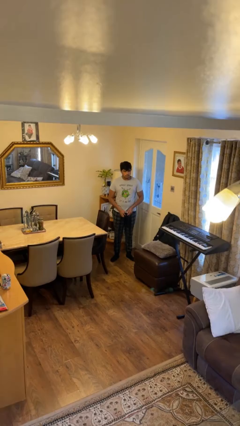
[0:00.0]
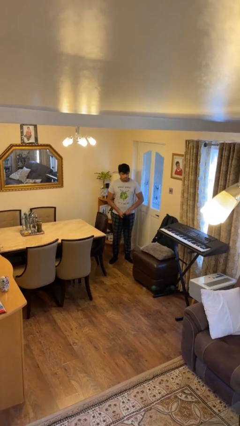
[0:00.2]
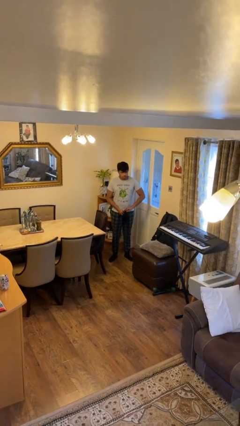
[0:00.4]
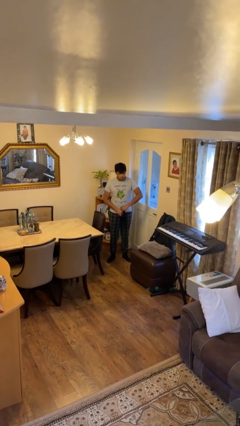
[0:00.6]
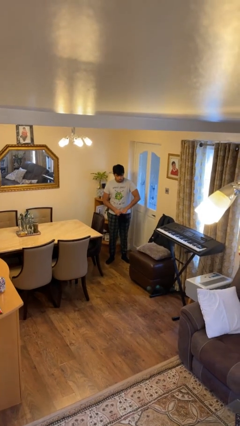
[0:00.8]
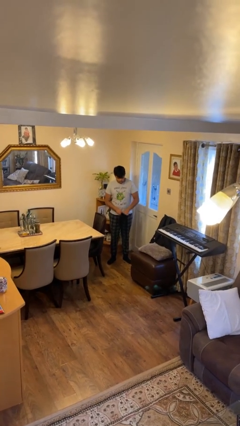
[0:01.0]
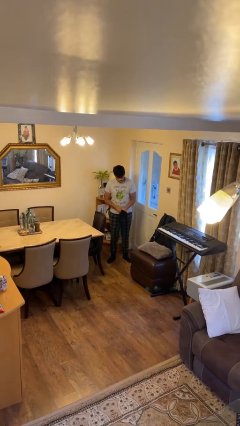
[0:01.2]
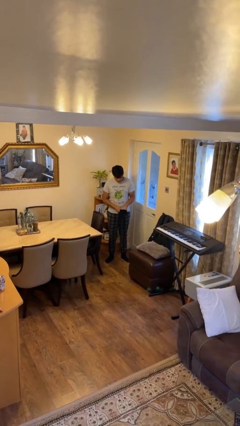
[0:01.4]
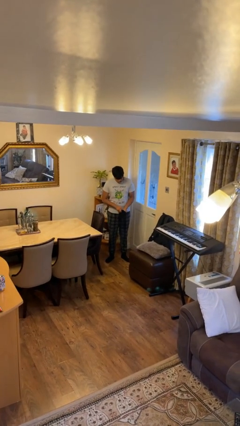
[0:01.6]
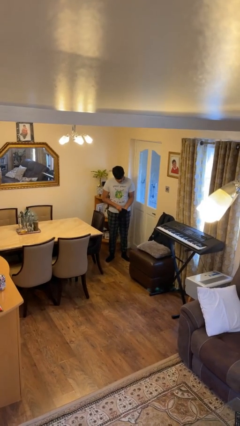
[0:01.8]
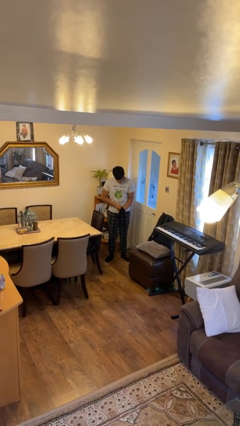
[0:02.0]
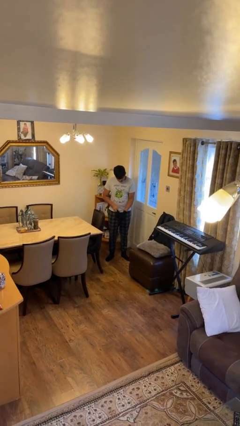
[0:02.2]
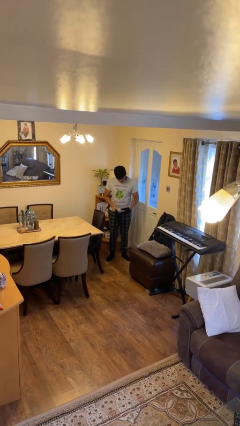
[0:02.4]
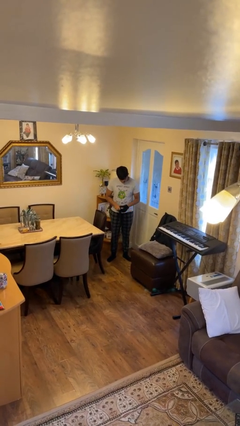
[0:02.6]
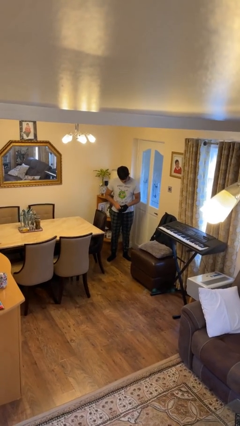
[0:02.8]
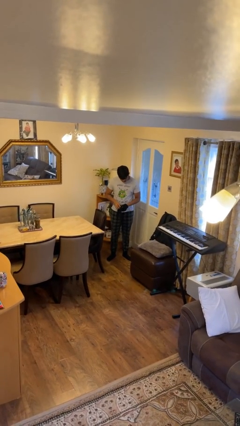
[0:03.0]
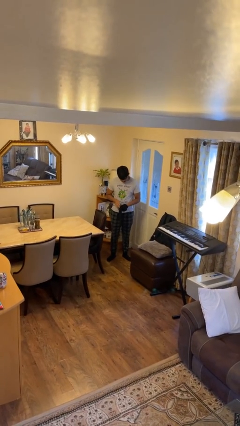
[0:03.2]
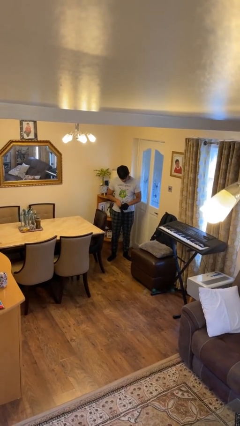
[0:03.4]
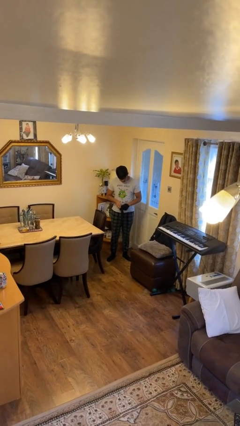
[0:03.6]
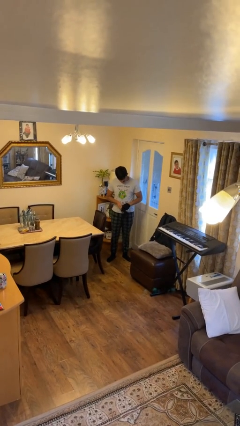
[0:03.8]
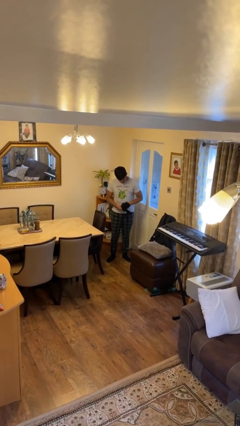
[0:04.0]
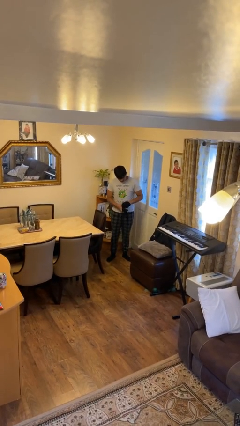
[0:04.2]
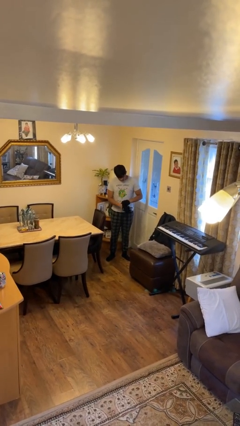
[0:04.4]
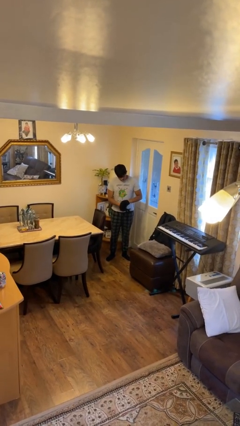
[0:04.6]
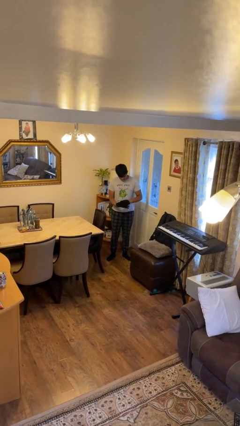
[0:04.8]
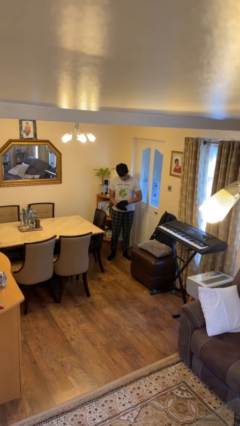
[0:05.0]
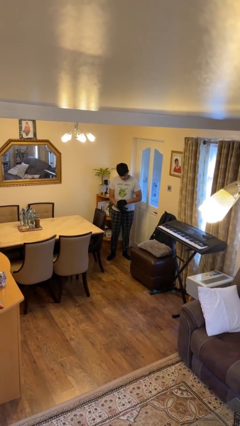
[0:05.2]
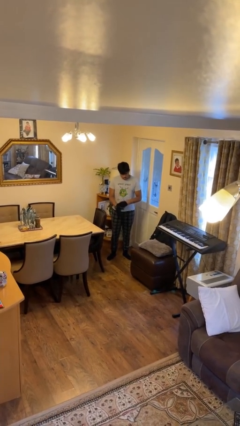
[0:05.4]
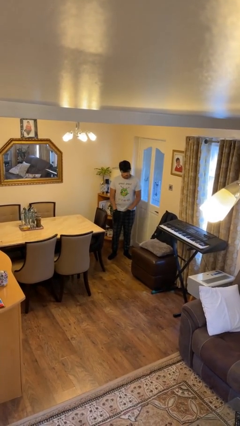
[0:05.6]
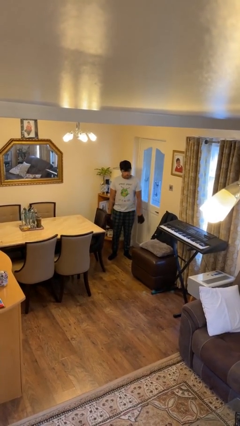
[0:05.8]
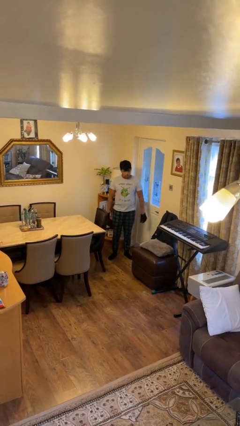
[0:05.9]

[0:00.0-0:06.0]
person puts on gloves

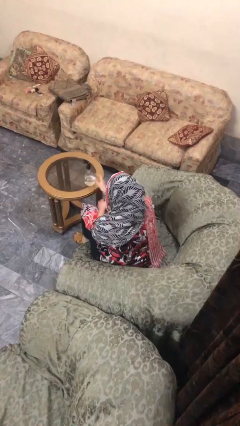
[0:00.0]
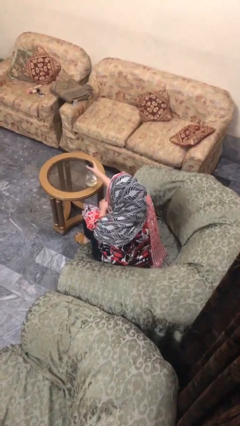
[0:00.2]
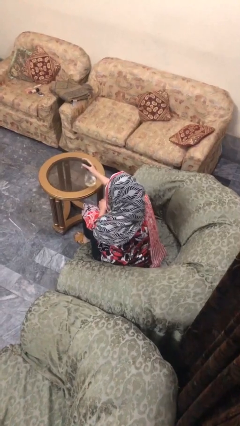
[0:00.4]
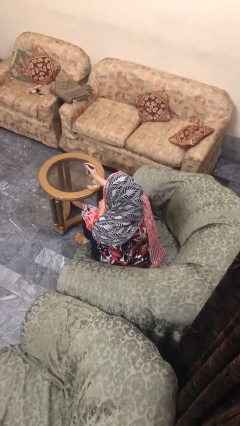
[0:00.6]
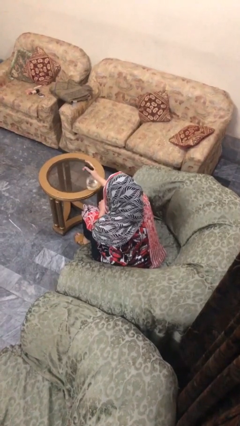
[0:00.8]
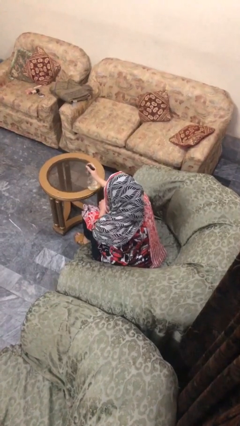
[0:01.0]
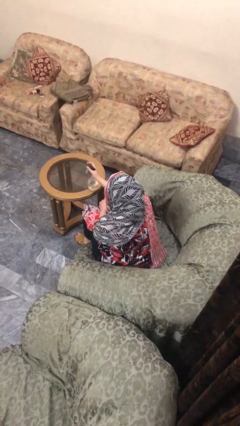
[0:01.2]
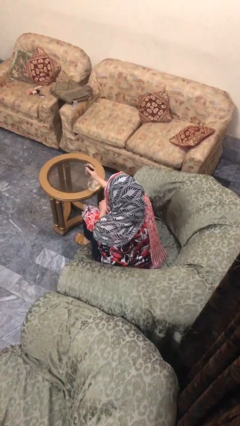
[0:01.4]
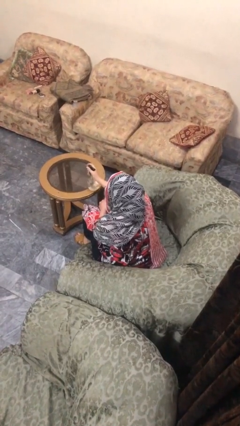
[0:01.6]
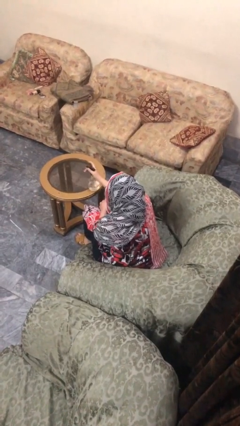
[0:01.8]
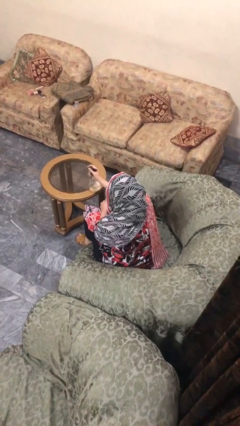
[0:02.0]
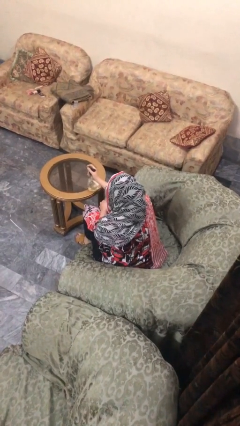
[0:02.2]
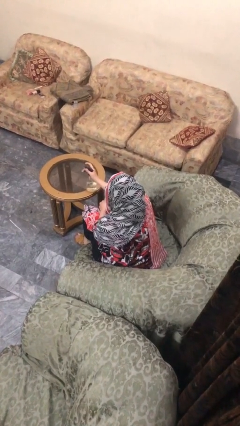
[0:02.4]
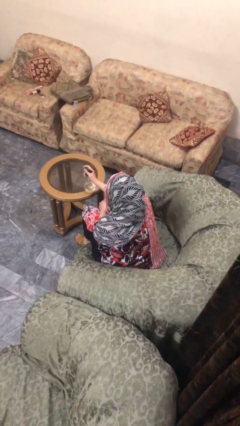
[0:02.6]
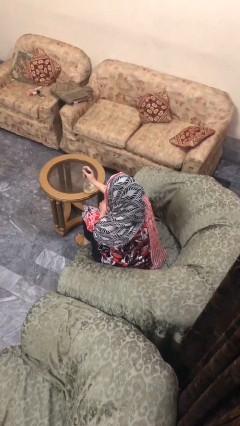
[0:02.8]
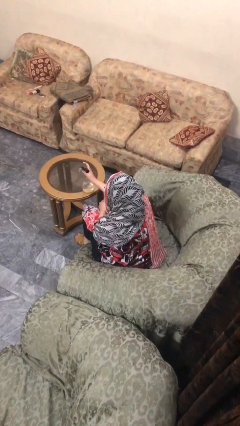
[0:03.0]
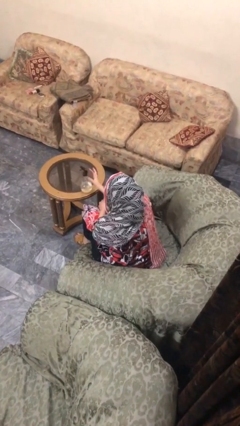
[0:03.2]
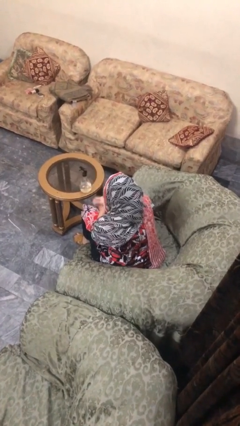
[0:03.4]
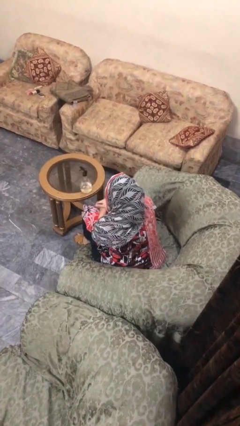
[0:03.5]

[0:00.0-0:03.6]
person sprays from bottle

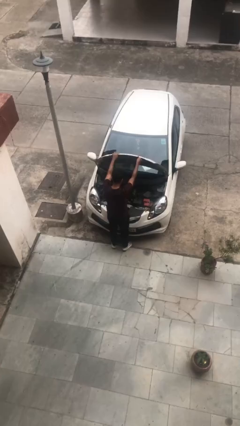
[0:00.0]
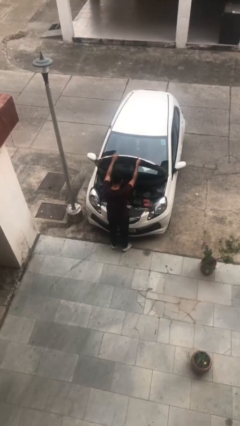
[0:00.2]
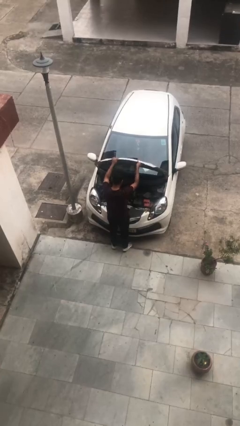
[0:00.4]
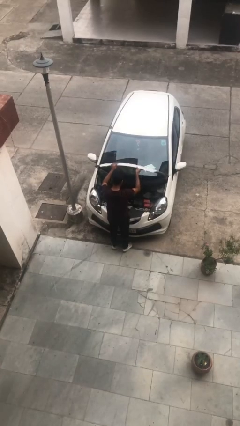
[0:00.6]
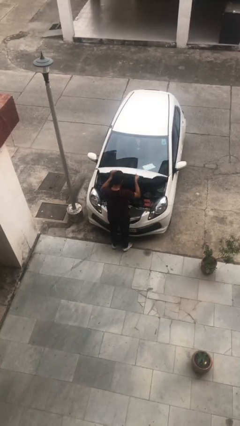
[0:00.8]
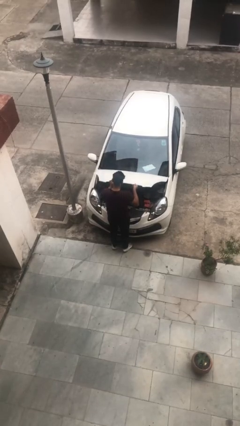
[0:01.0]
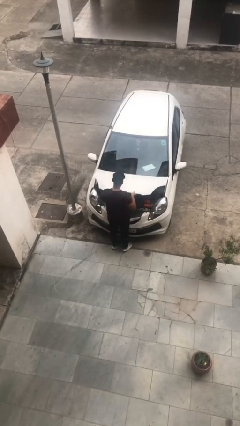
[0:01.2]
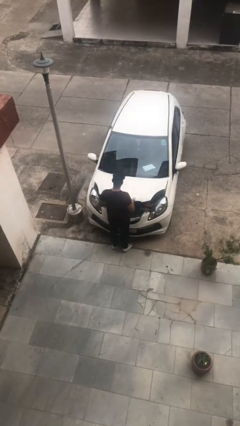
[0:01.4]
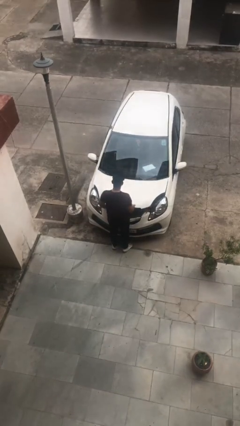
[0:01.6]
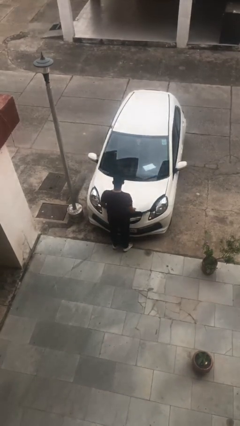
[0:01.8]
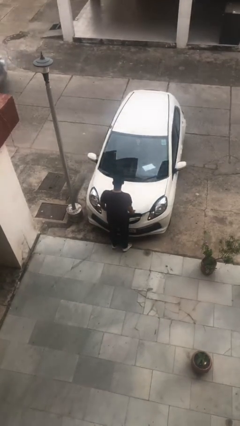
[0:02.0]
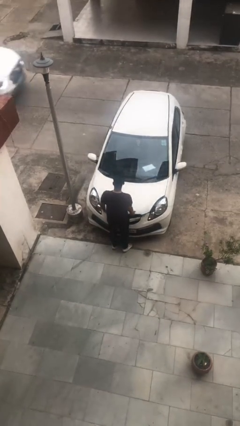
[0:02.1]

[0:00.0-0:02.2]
person closes car hood

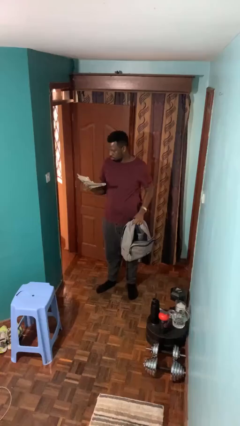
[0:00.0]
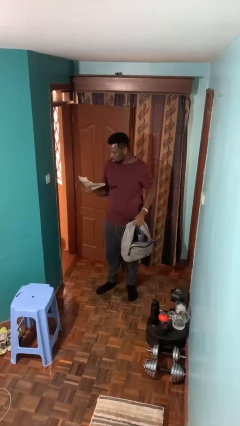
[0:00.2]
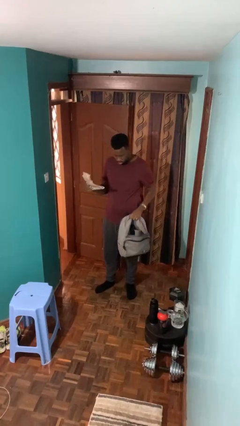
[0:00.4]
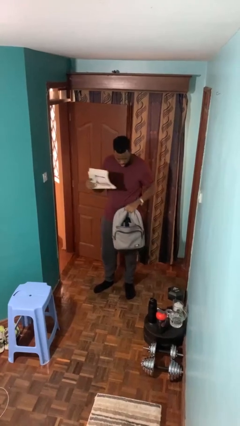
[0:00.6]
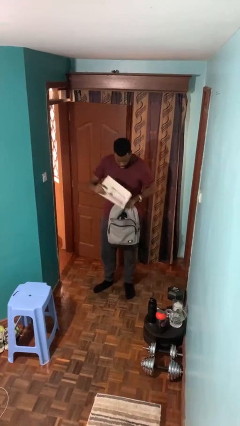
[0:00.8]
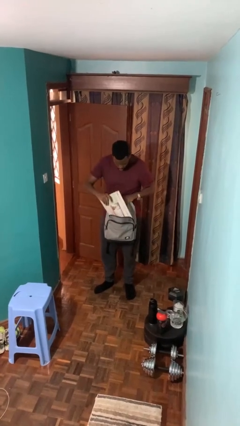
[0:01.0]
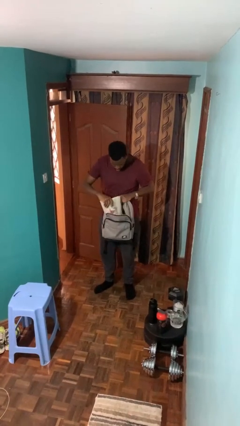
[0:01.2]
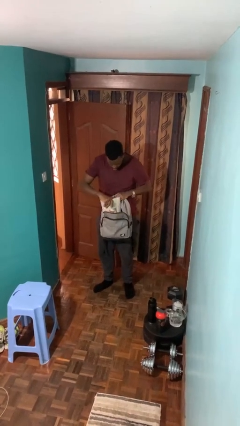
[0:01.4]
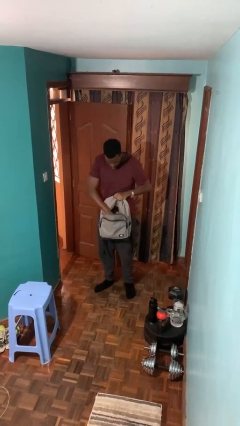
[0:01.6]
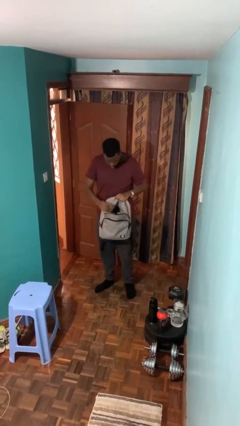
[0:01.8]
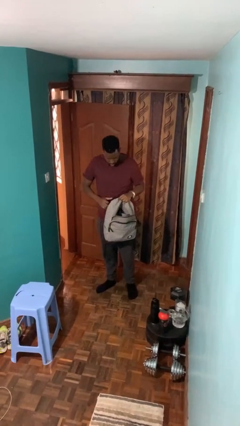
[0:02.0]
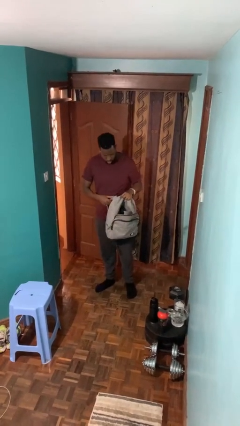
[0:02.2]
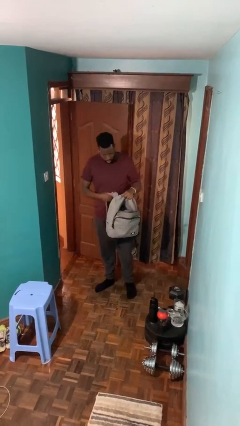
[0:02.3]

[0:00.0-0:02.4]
person puts object into backpack

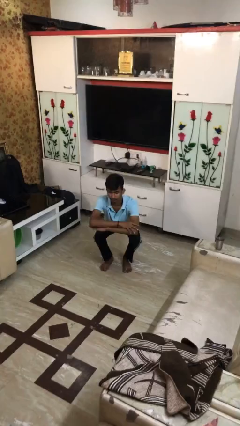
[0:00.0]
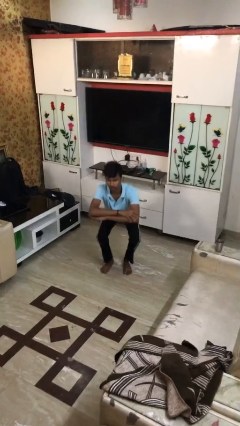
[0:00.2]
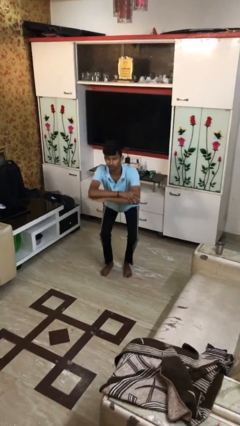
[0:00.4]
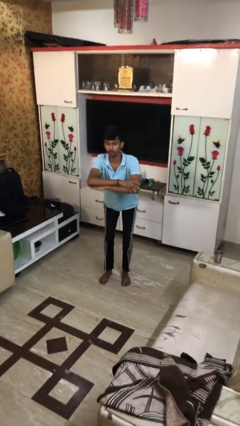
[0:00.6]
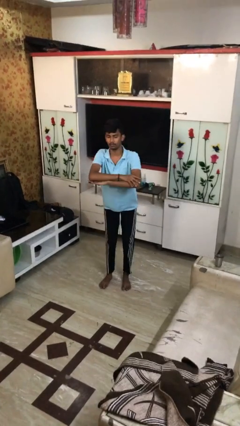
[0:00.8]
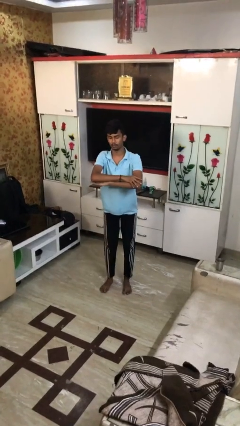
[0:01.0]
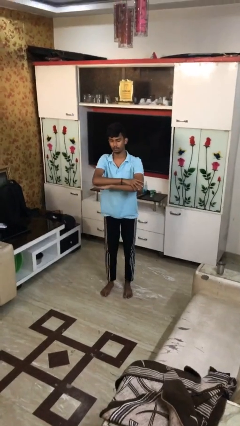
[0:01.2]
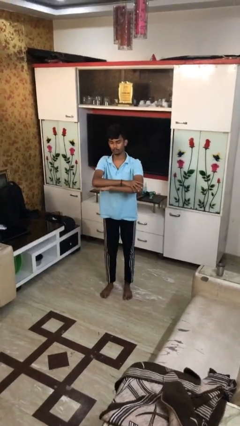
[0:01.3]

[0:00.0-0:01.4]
person stands up

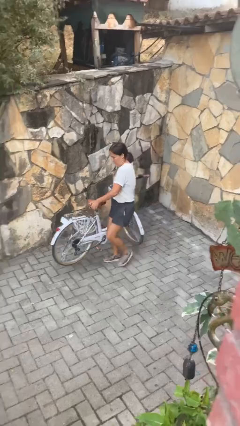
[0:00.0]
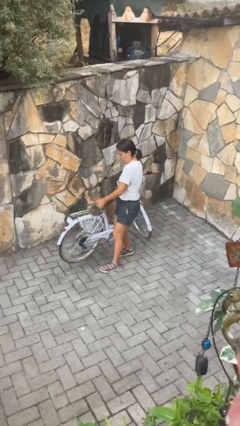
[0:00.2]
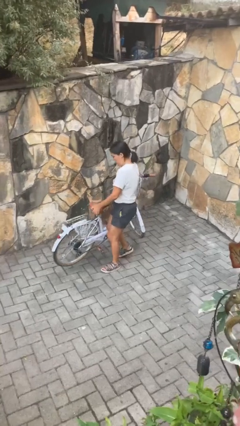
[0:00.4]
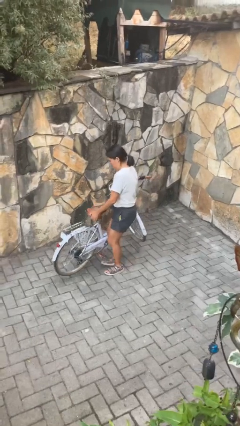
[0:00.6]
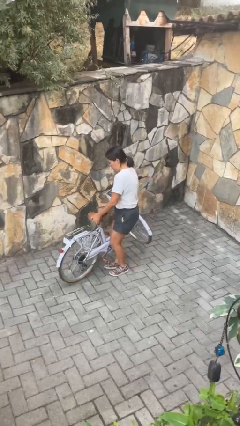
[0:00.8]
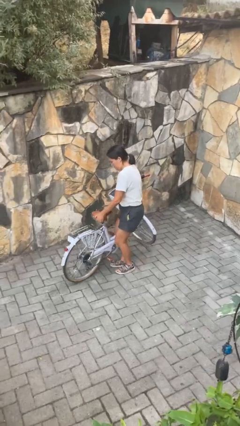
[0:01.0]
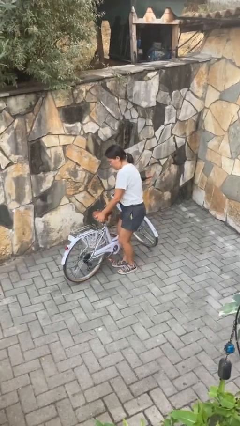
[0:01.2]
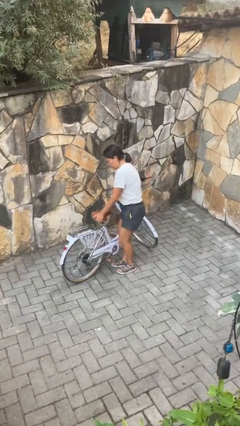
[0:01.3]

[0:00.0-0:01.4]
person carries bicycle
